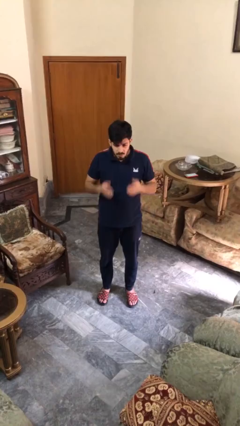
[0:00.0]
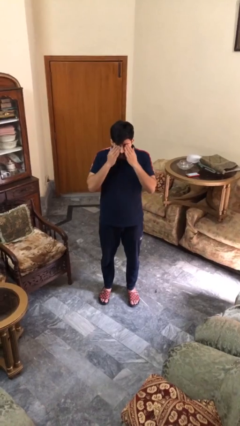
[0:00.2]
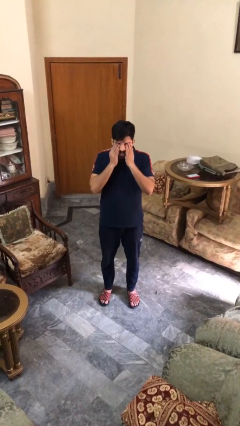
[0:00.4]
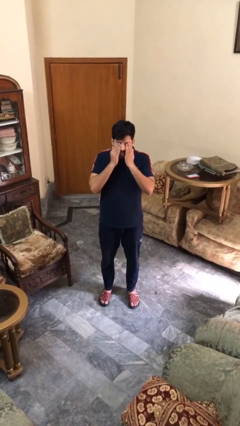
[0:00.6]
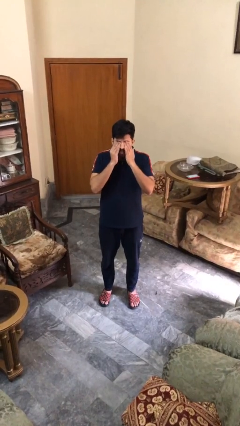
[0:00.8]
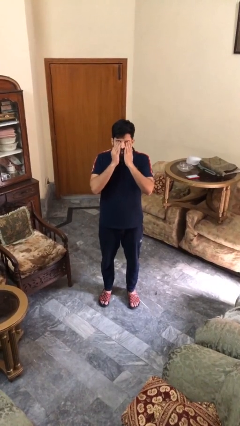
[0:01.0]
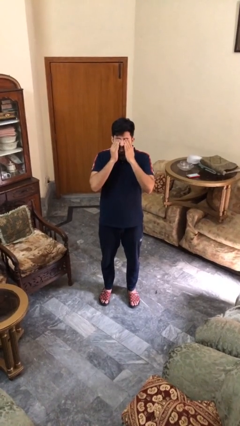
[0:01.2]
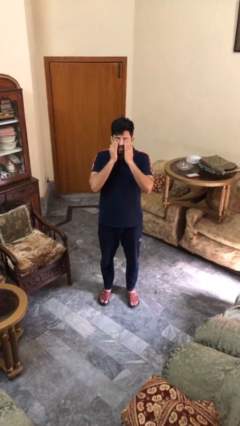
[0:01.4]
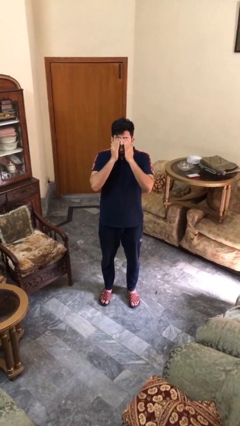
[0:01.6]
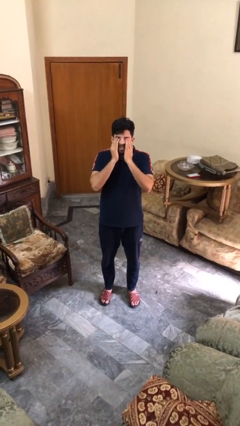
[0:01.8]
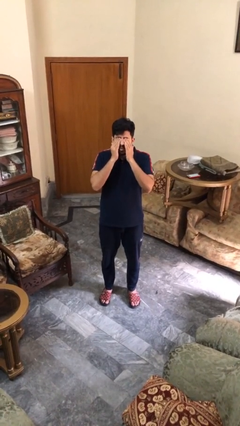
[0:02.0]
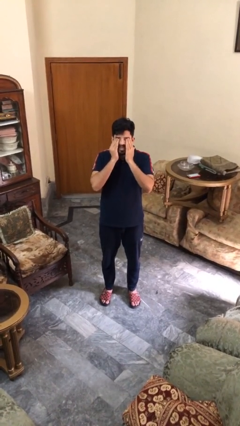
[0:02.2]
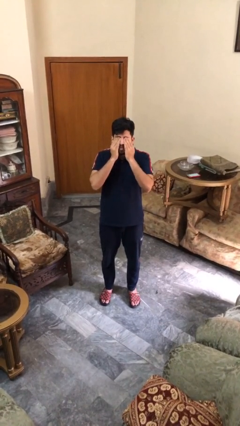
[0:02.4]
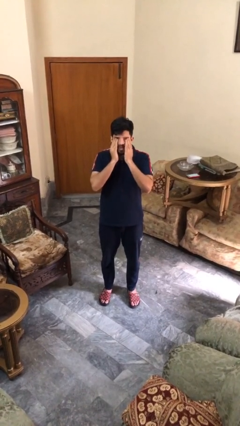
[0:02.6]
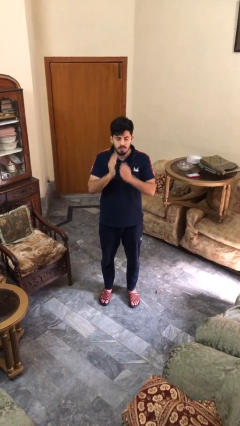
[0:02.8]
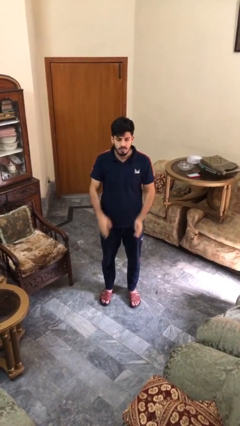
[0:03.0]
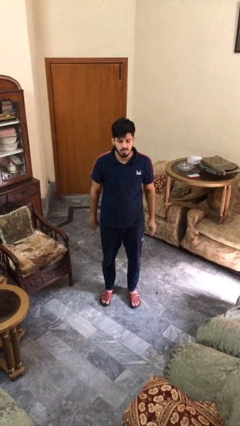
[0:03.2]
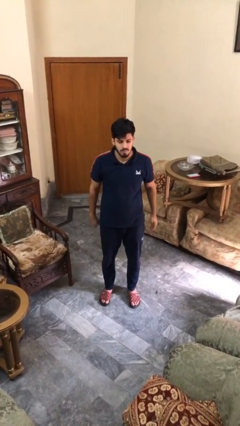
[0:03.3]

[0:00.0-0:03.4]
person rubs eyes

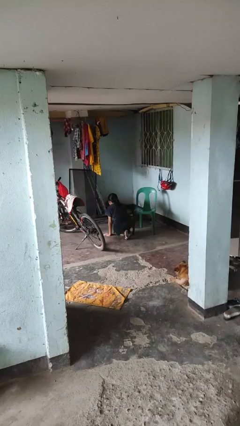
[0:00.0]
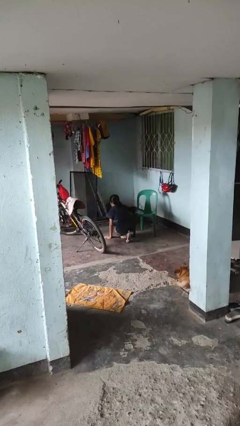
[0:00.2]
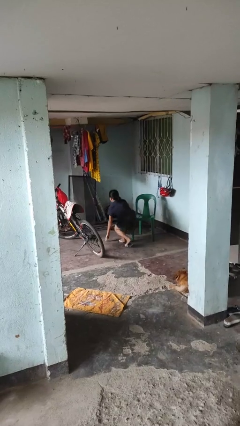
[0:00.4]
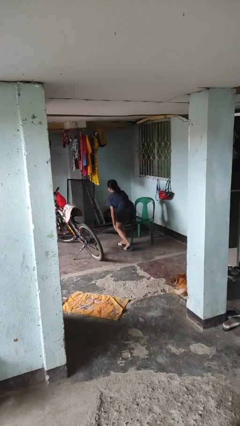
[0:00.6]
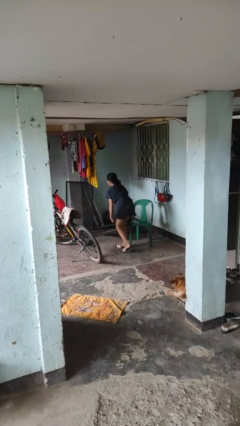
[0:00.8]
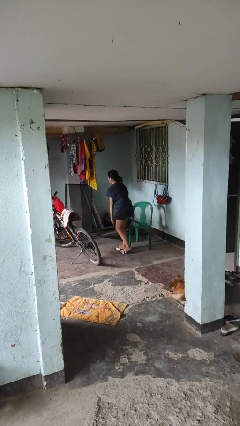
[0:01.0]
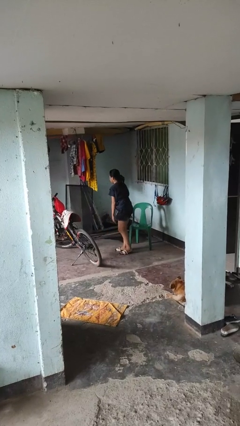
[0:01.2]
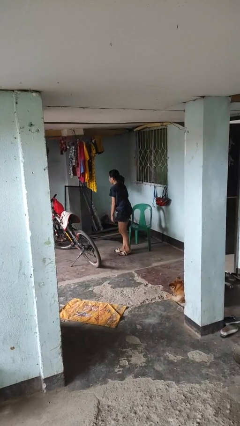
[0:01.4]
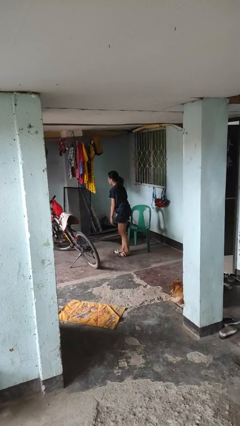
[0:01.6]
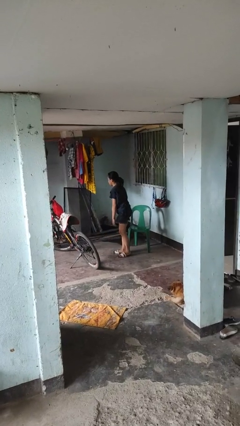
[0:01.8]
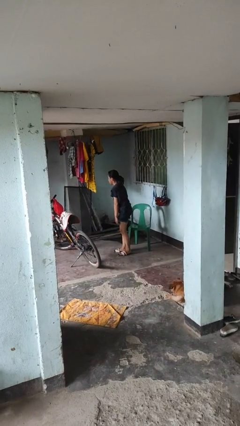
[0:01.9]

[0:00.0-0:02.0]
person stands up from floor

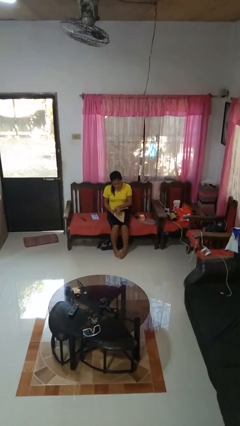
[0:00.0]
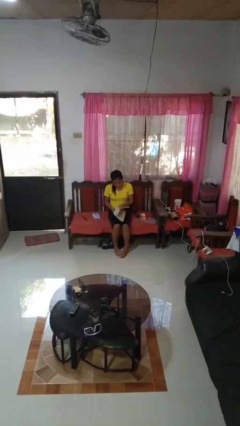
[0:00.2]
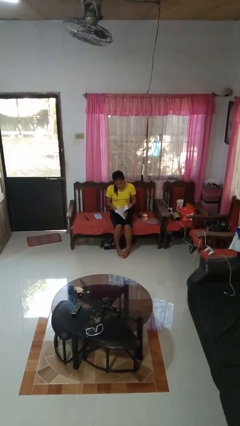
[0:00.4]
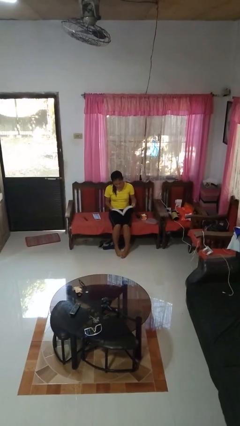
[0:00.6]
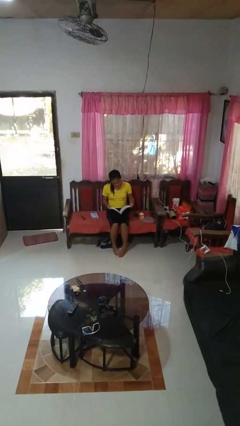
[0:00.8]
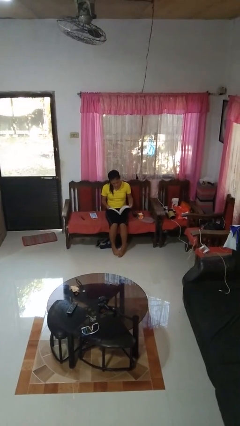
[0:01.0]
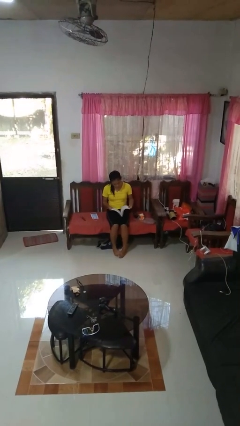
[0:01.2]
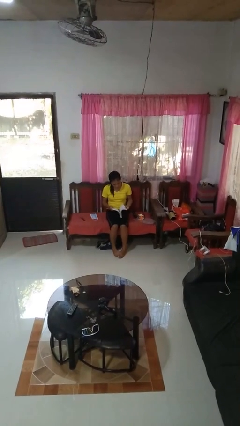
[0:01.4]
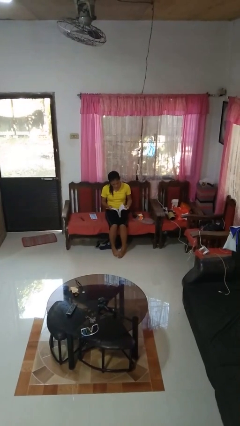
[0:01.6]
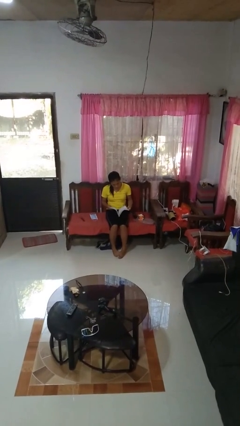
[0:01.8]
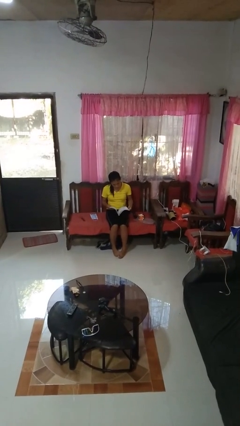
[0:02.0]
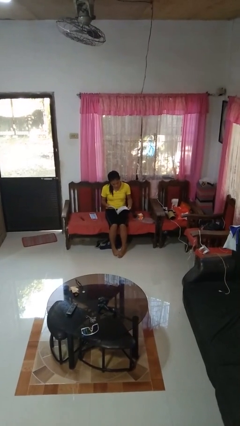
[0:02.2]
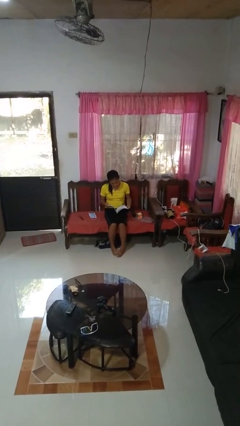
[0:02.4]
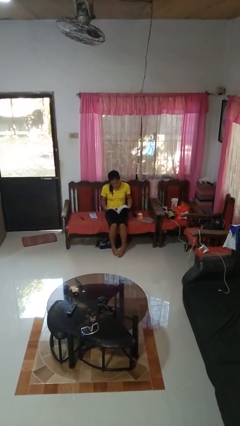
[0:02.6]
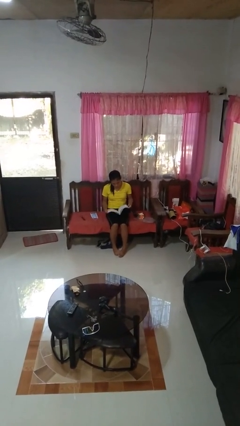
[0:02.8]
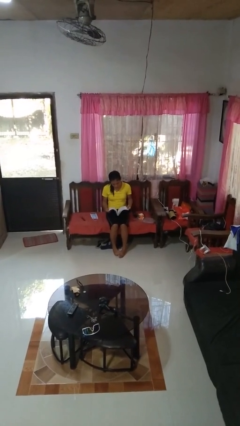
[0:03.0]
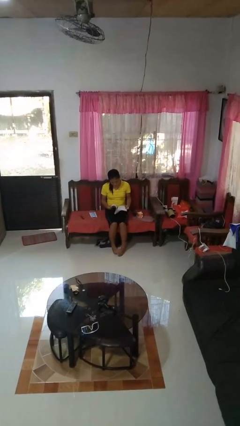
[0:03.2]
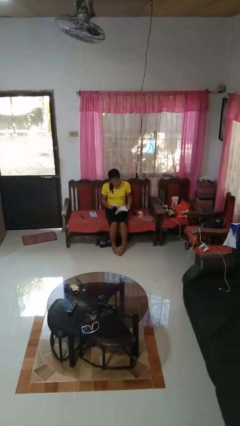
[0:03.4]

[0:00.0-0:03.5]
person reads book

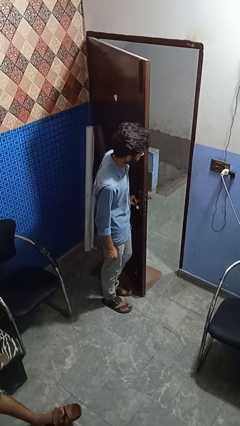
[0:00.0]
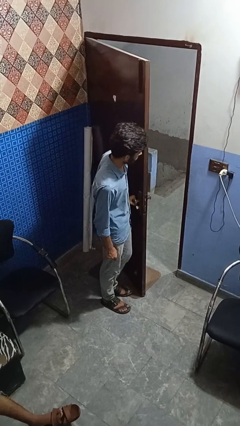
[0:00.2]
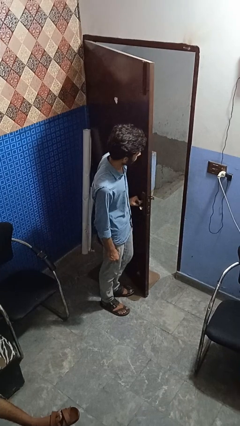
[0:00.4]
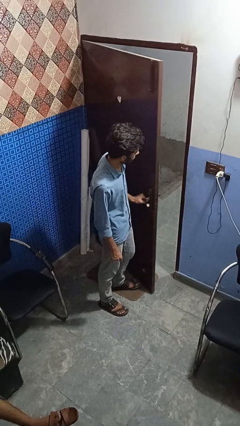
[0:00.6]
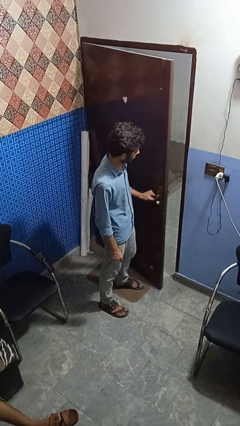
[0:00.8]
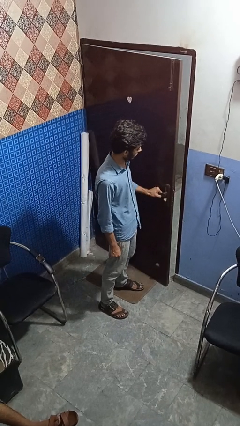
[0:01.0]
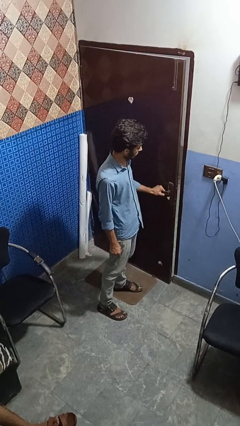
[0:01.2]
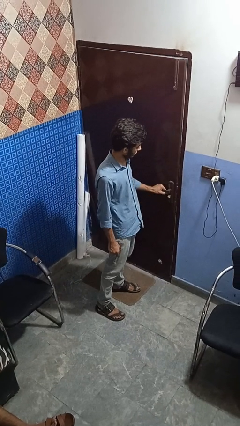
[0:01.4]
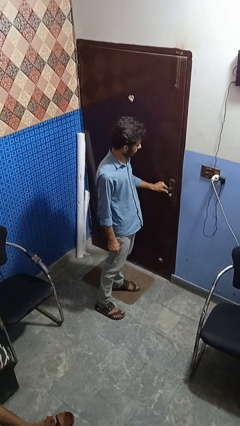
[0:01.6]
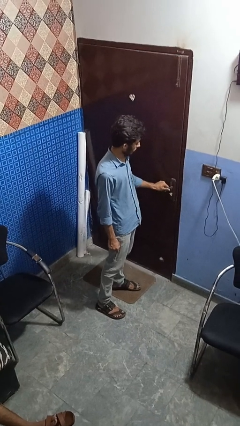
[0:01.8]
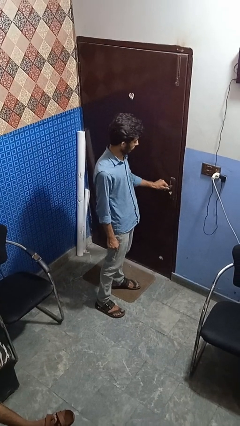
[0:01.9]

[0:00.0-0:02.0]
person closes facility door

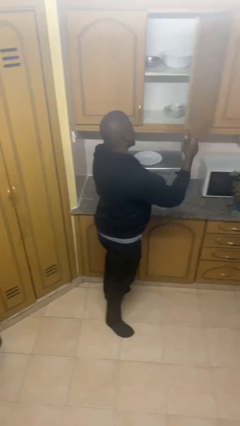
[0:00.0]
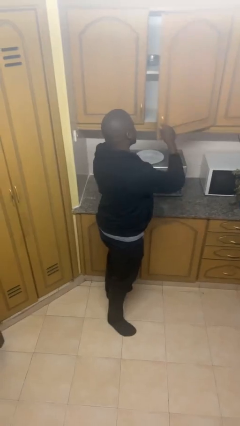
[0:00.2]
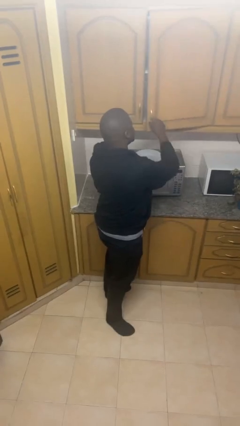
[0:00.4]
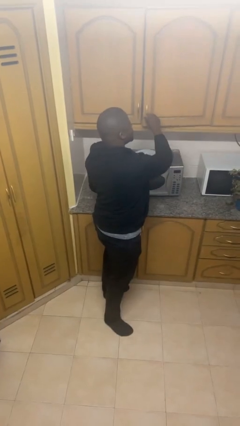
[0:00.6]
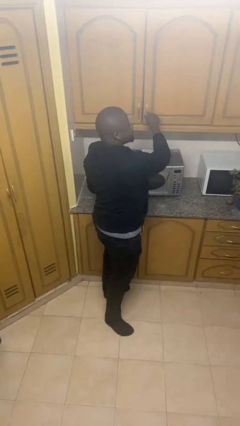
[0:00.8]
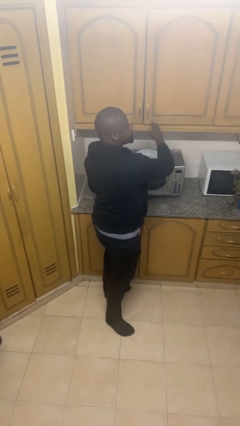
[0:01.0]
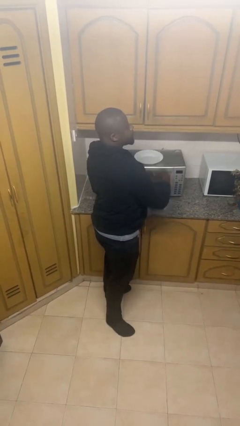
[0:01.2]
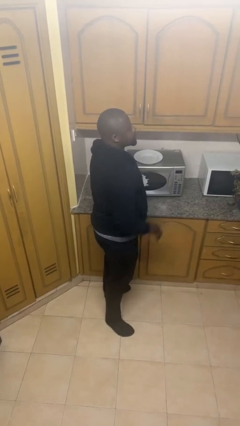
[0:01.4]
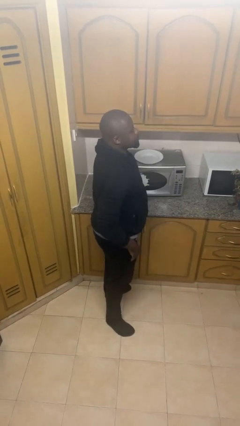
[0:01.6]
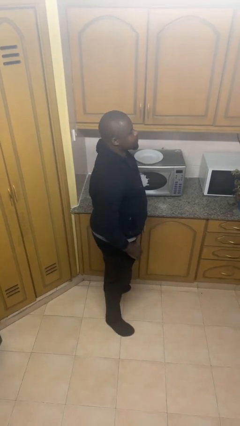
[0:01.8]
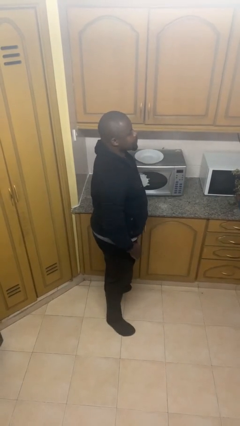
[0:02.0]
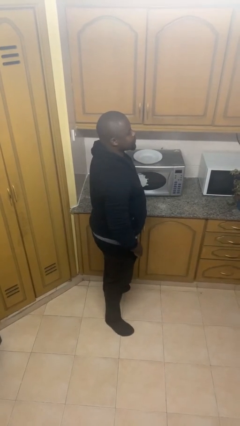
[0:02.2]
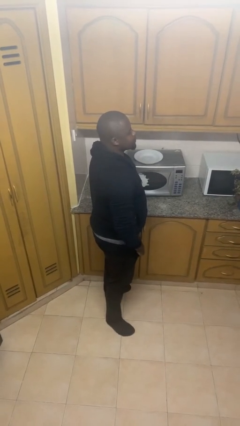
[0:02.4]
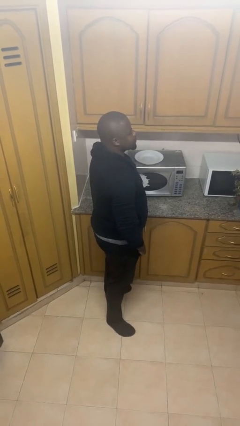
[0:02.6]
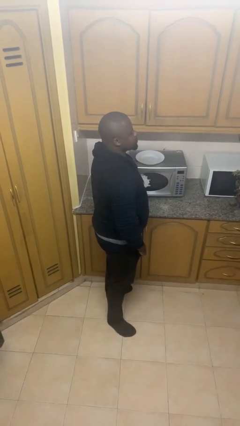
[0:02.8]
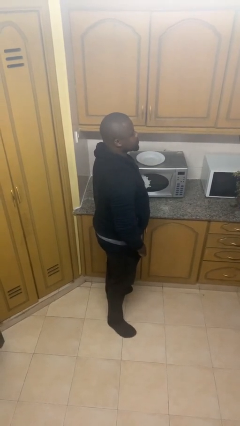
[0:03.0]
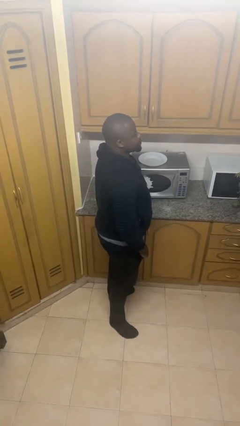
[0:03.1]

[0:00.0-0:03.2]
person closes cabinet

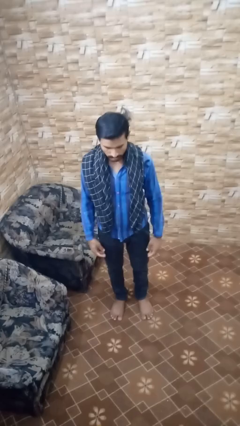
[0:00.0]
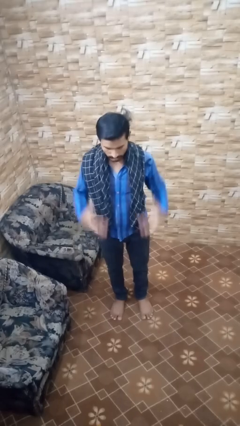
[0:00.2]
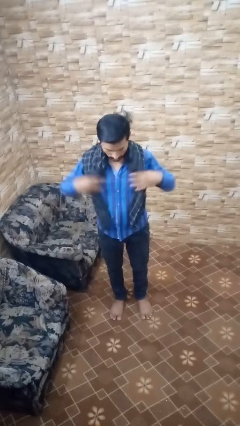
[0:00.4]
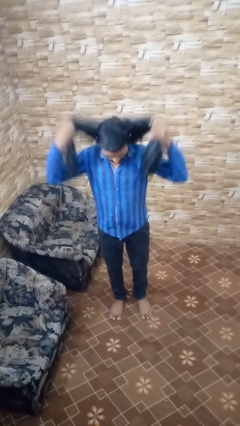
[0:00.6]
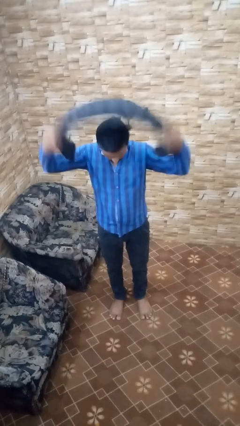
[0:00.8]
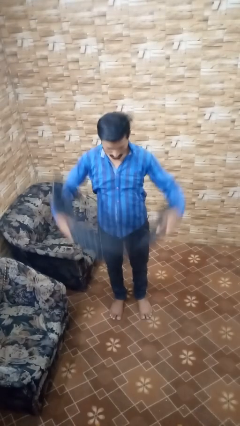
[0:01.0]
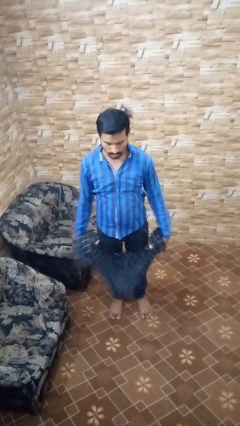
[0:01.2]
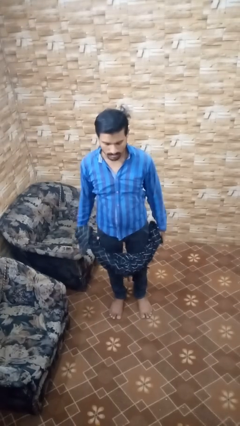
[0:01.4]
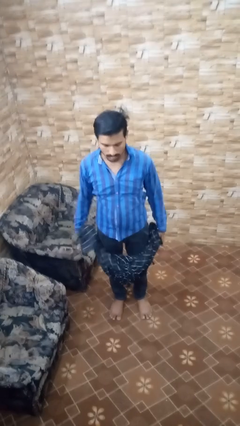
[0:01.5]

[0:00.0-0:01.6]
person takes off scarf

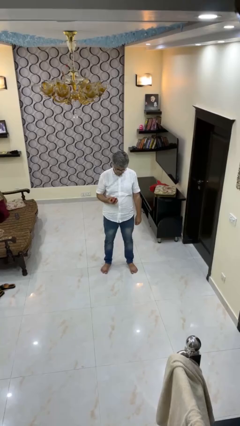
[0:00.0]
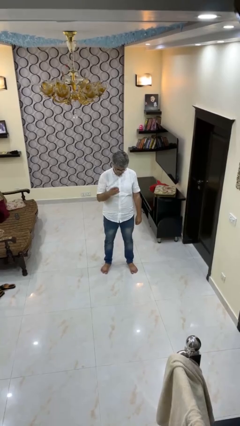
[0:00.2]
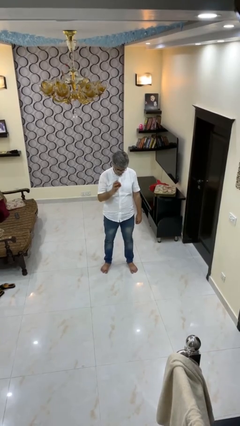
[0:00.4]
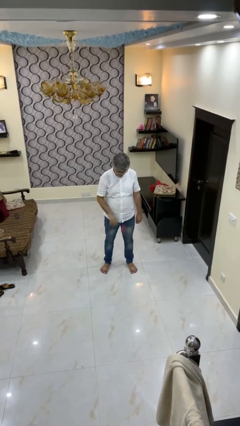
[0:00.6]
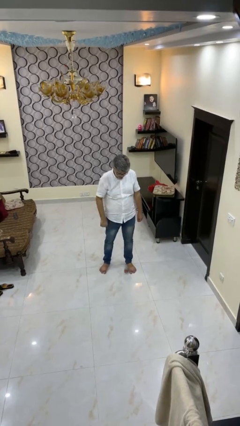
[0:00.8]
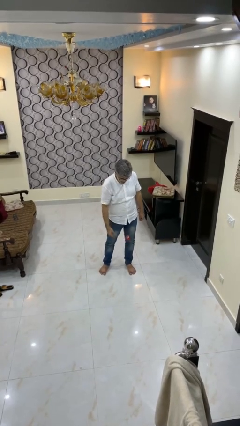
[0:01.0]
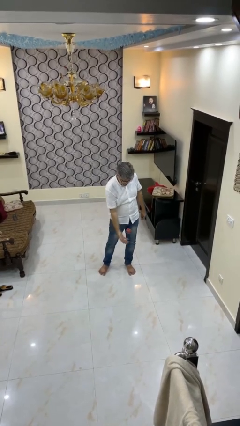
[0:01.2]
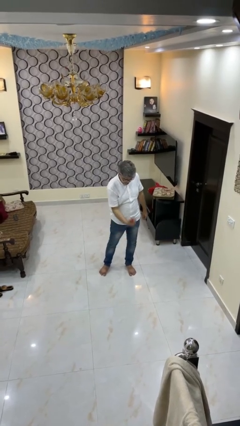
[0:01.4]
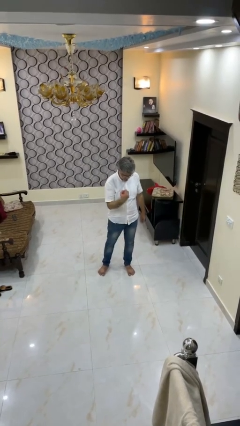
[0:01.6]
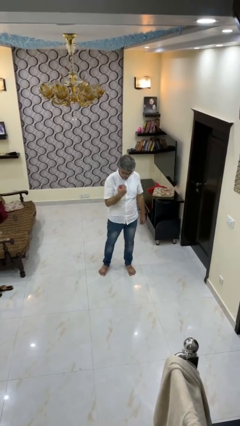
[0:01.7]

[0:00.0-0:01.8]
person bounces ball on floor
